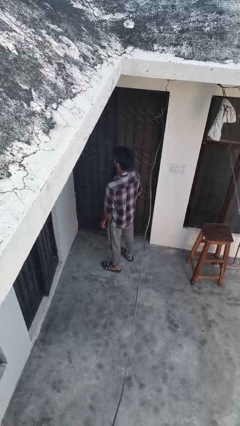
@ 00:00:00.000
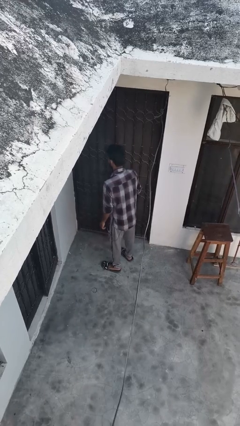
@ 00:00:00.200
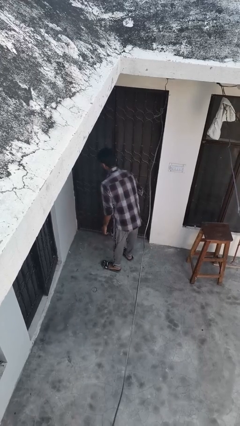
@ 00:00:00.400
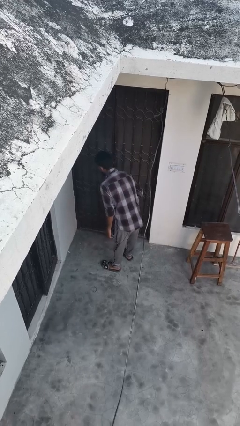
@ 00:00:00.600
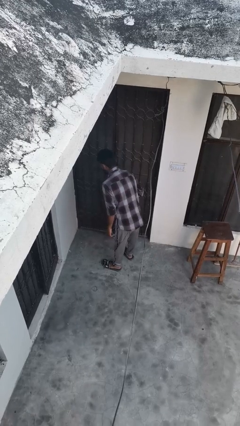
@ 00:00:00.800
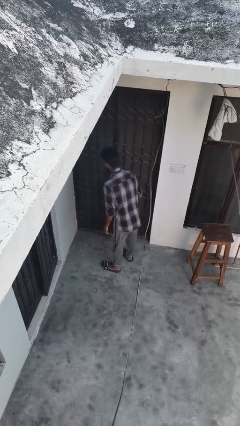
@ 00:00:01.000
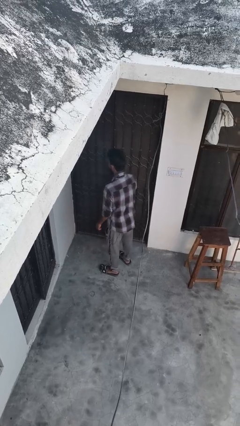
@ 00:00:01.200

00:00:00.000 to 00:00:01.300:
person bows

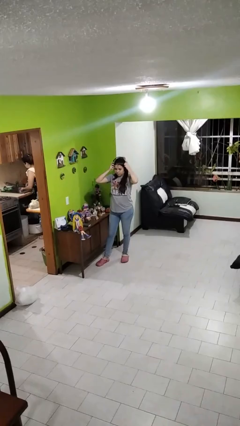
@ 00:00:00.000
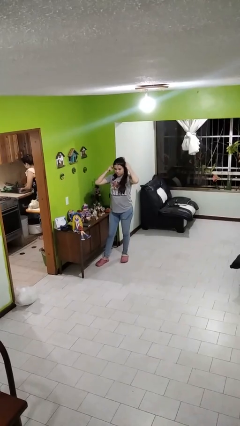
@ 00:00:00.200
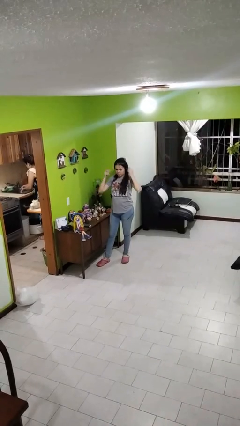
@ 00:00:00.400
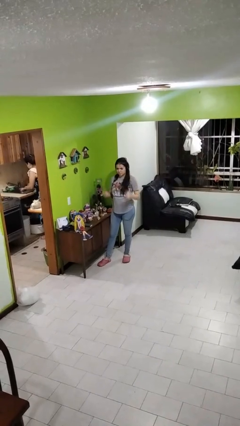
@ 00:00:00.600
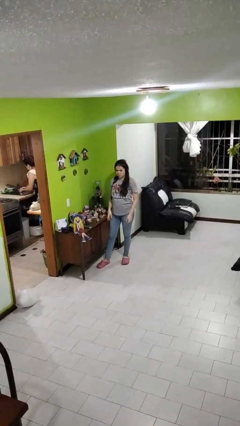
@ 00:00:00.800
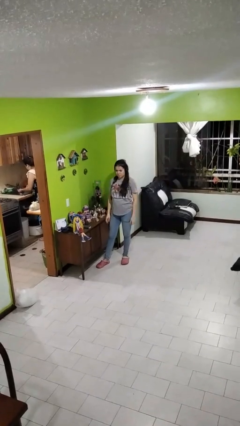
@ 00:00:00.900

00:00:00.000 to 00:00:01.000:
person puts on headphones

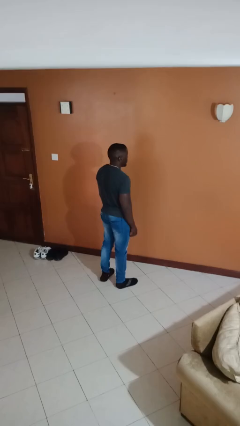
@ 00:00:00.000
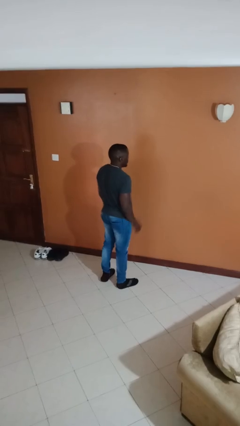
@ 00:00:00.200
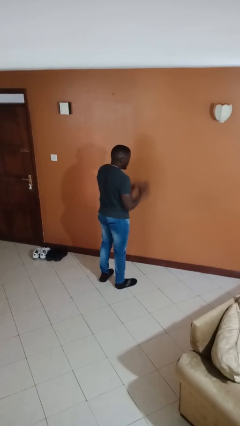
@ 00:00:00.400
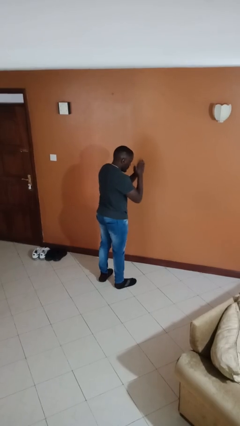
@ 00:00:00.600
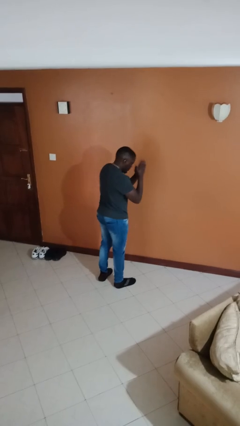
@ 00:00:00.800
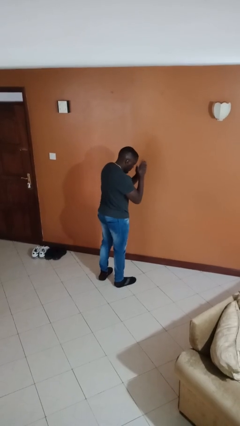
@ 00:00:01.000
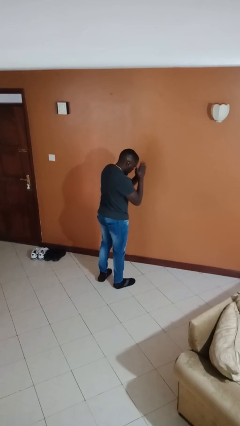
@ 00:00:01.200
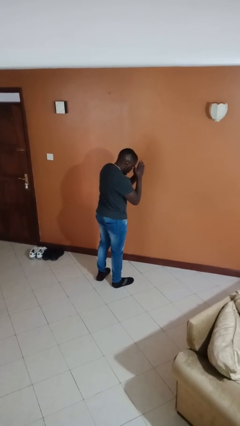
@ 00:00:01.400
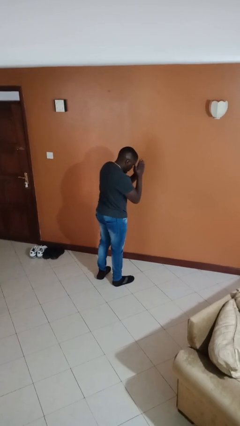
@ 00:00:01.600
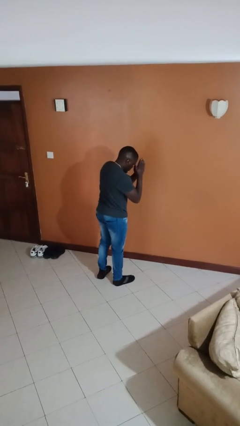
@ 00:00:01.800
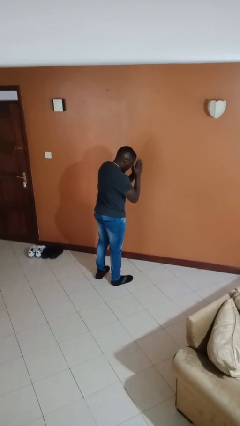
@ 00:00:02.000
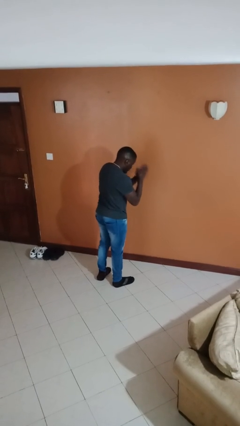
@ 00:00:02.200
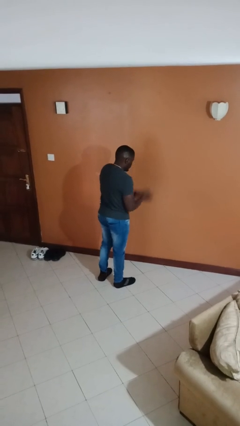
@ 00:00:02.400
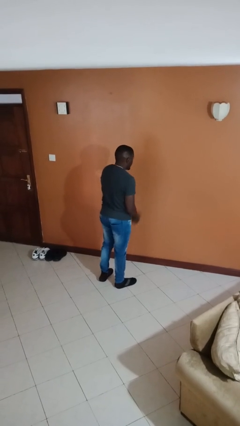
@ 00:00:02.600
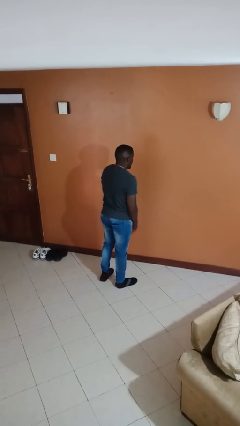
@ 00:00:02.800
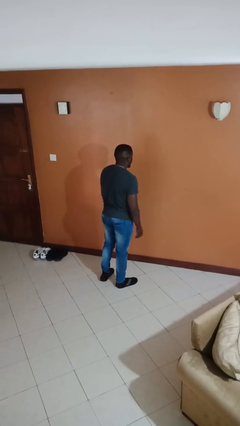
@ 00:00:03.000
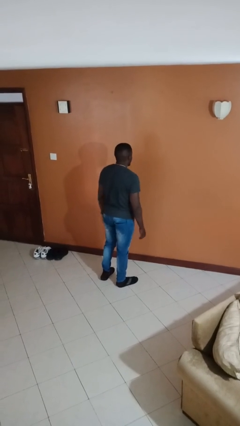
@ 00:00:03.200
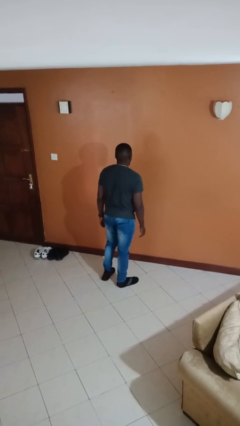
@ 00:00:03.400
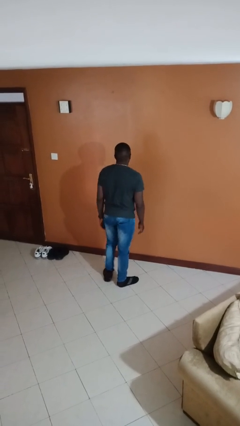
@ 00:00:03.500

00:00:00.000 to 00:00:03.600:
person prays

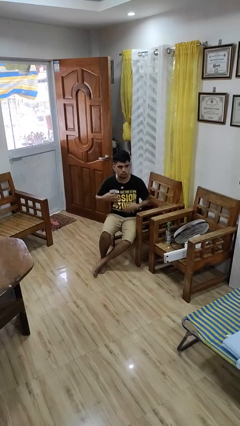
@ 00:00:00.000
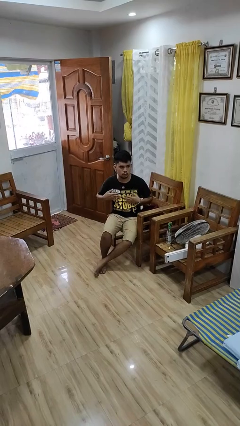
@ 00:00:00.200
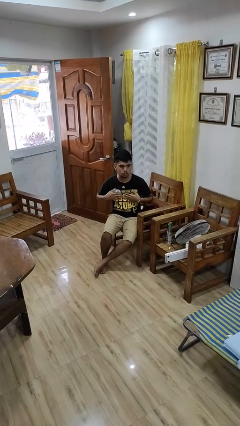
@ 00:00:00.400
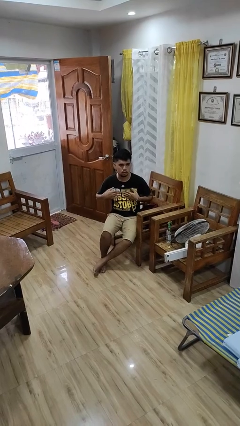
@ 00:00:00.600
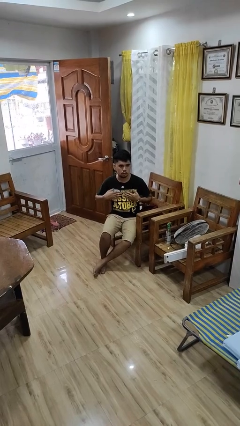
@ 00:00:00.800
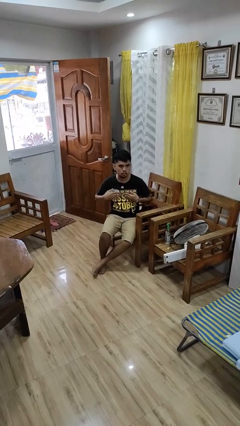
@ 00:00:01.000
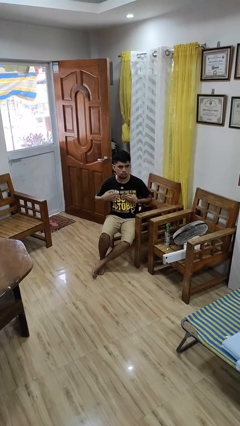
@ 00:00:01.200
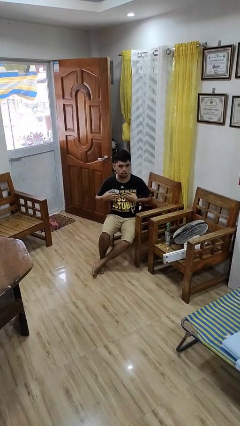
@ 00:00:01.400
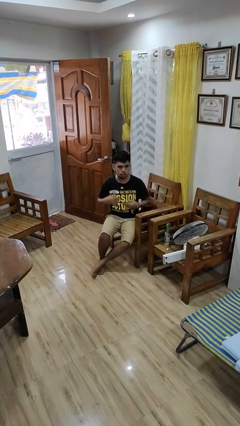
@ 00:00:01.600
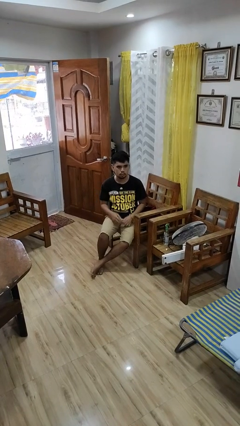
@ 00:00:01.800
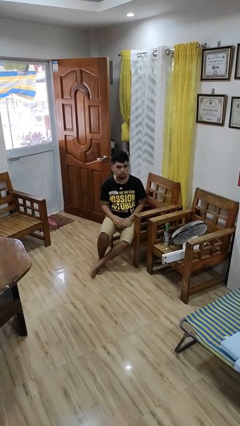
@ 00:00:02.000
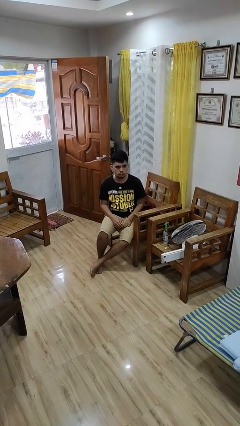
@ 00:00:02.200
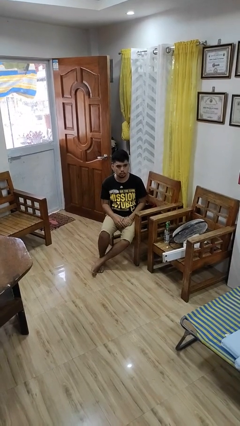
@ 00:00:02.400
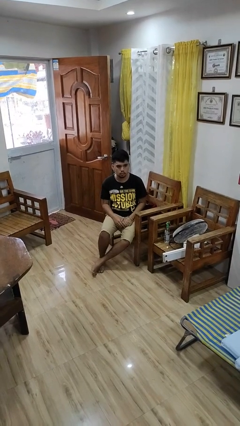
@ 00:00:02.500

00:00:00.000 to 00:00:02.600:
person drums on chest

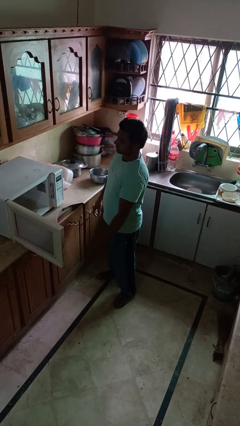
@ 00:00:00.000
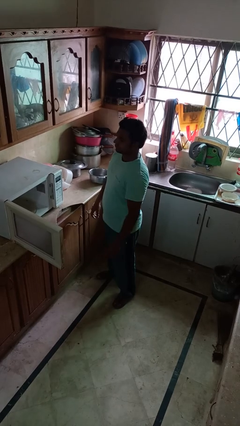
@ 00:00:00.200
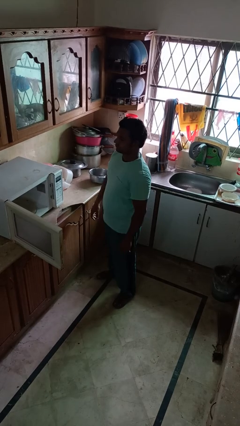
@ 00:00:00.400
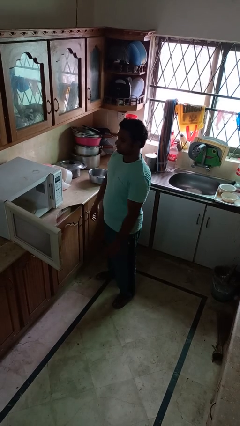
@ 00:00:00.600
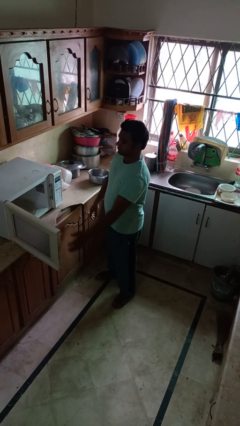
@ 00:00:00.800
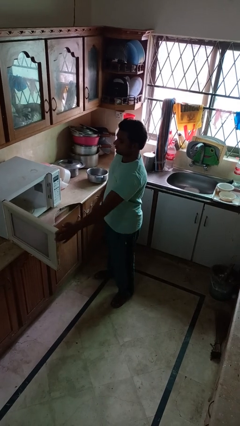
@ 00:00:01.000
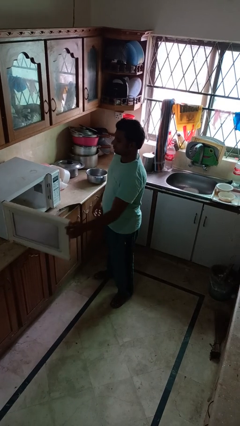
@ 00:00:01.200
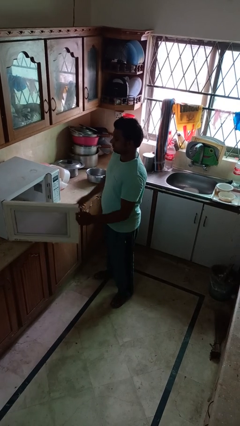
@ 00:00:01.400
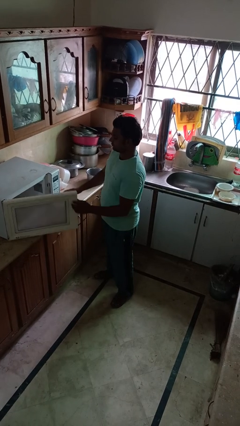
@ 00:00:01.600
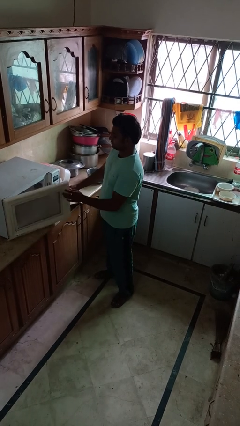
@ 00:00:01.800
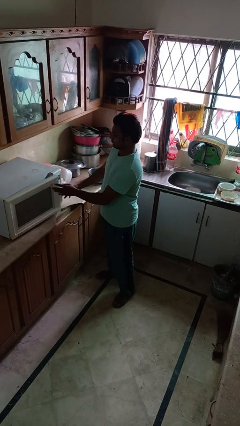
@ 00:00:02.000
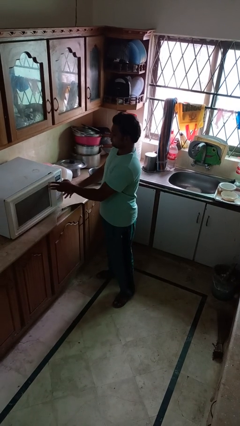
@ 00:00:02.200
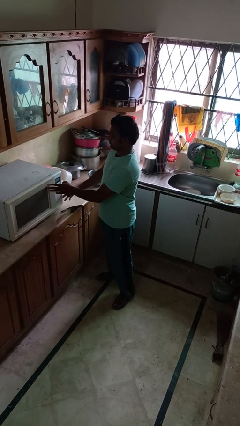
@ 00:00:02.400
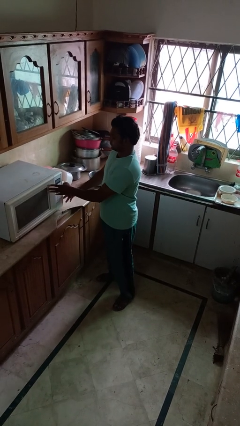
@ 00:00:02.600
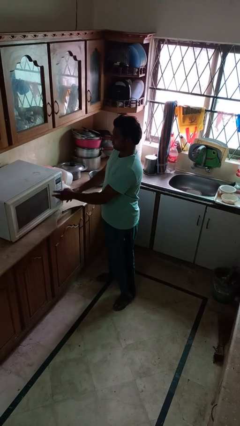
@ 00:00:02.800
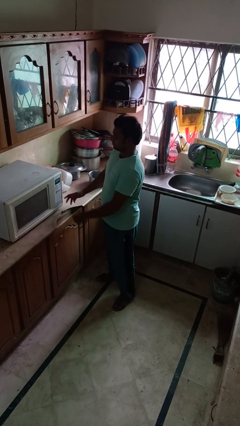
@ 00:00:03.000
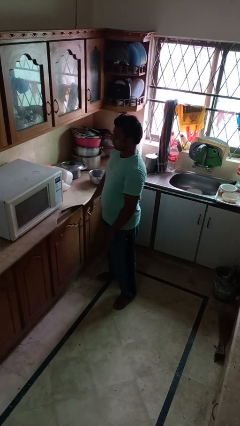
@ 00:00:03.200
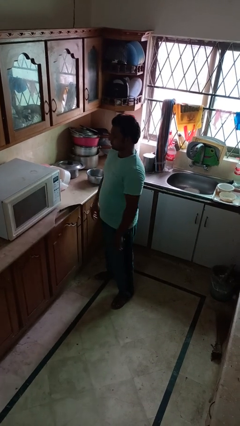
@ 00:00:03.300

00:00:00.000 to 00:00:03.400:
person closes microwave

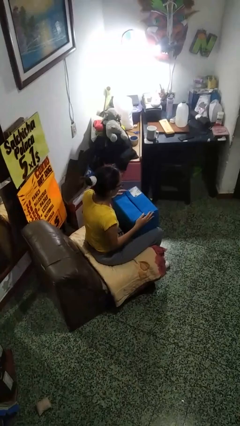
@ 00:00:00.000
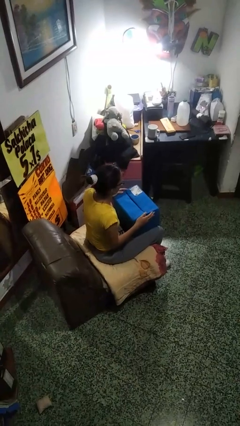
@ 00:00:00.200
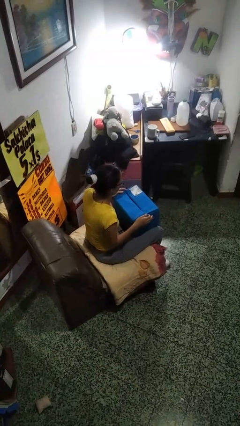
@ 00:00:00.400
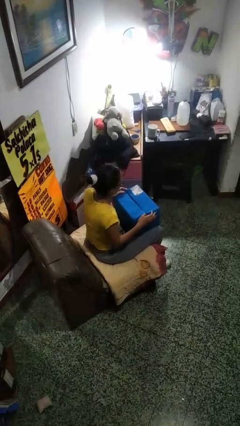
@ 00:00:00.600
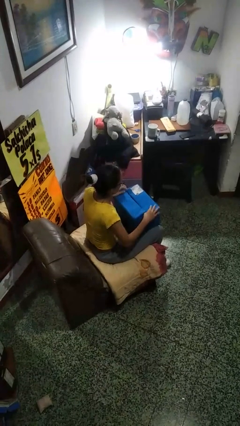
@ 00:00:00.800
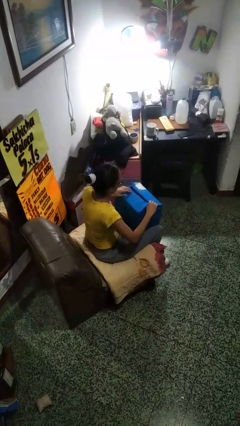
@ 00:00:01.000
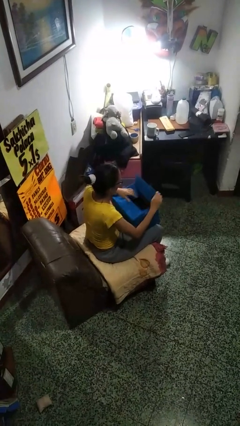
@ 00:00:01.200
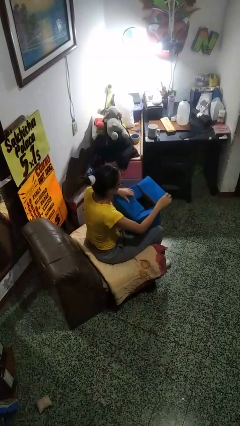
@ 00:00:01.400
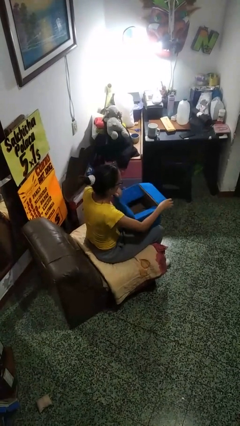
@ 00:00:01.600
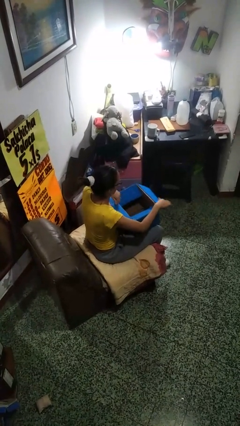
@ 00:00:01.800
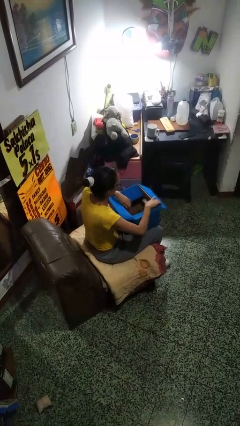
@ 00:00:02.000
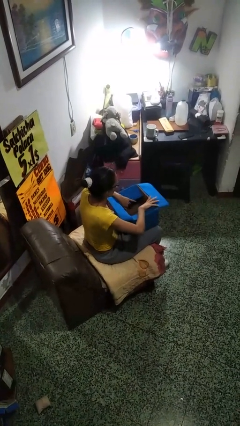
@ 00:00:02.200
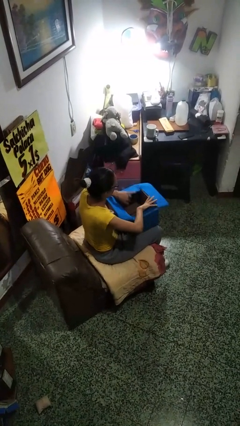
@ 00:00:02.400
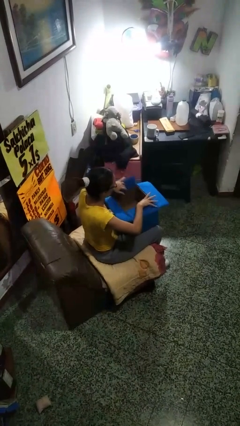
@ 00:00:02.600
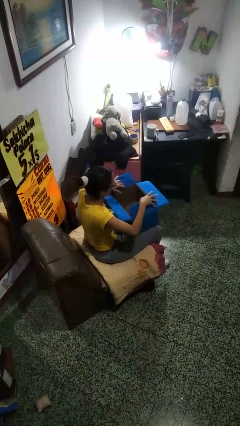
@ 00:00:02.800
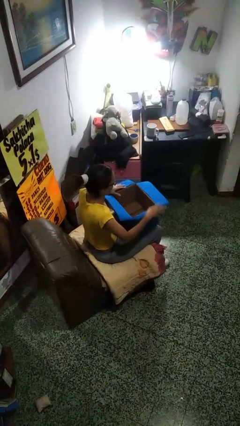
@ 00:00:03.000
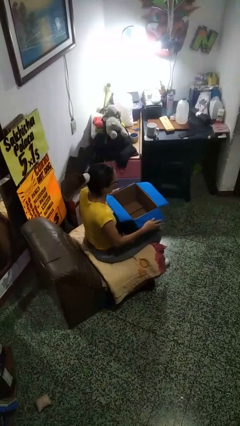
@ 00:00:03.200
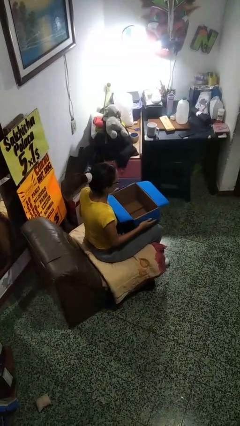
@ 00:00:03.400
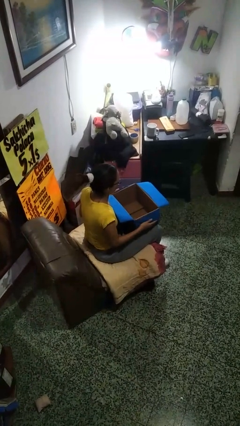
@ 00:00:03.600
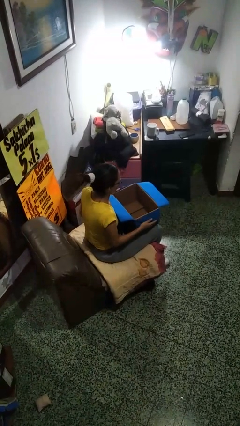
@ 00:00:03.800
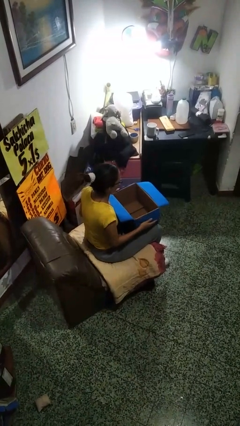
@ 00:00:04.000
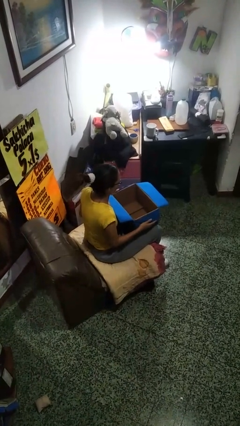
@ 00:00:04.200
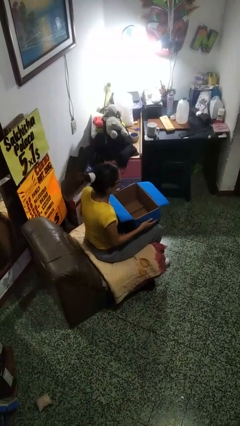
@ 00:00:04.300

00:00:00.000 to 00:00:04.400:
person opens box

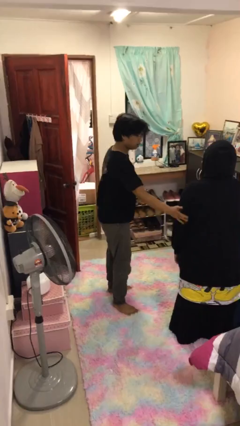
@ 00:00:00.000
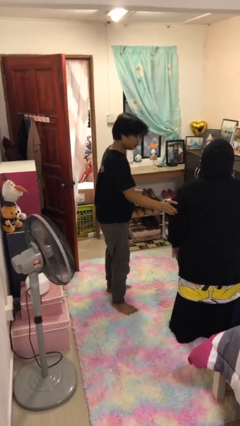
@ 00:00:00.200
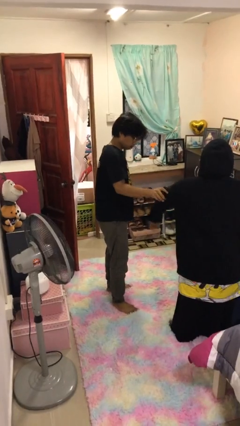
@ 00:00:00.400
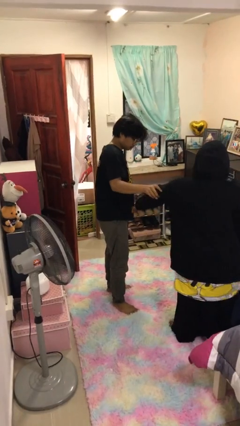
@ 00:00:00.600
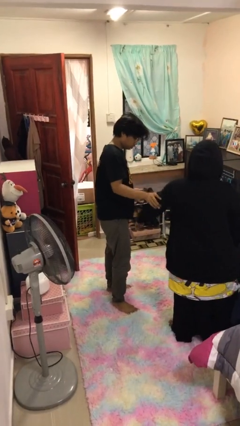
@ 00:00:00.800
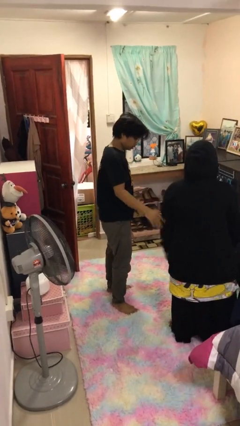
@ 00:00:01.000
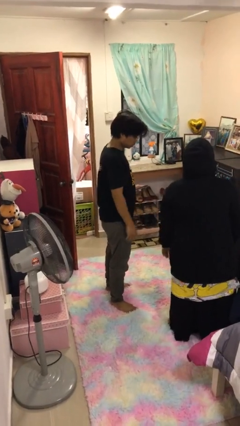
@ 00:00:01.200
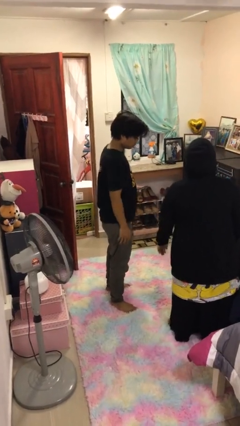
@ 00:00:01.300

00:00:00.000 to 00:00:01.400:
person grabs person by bicep
